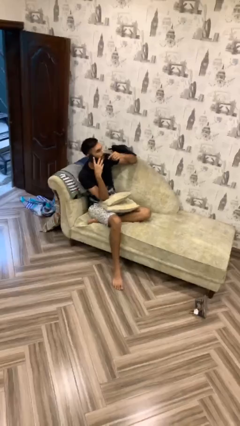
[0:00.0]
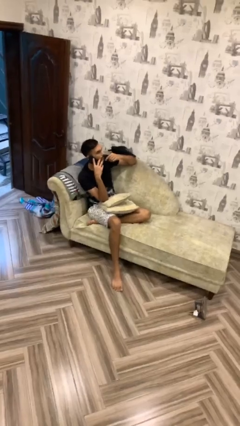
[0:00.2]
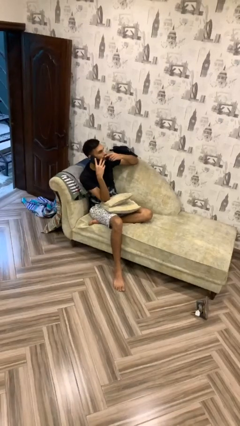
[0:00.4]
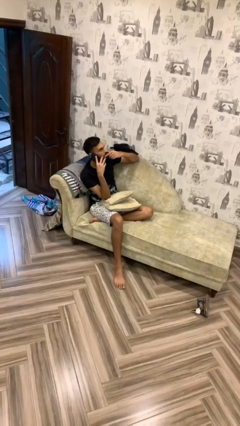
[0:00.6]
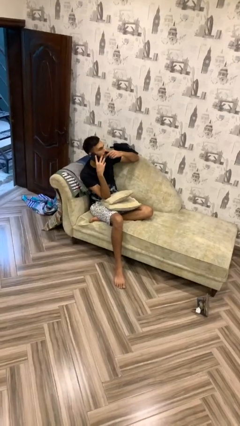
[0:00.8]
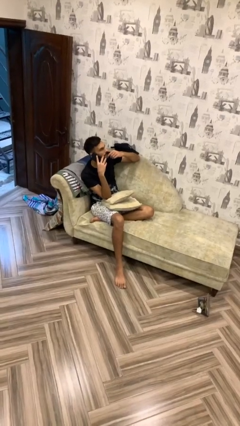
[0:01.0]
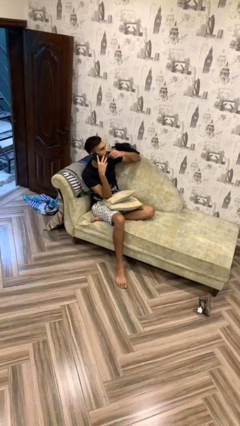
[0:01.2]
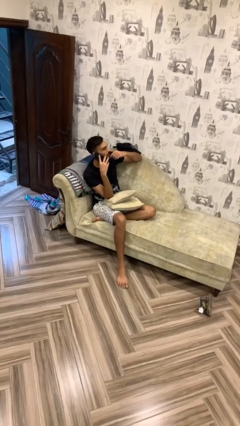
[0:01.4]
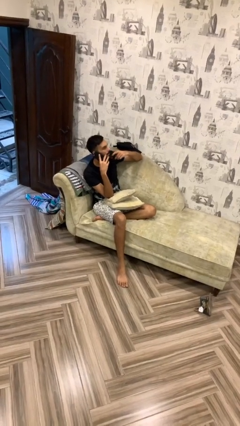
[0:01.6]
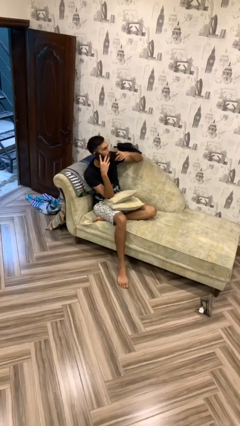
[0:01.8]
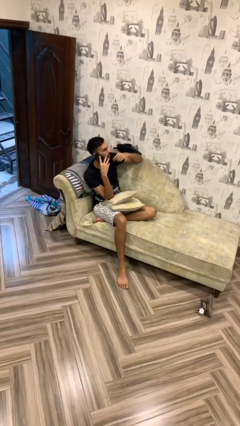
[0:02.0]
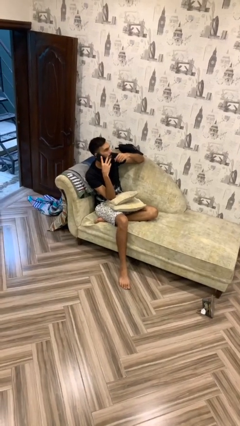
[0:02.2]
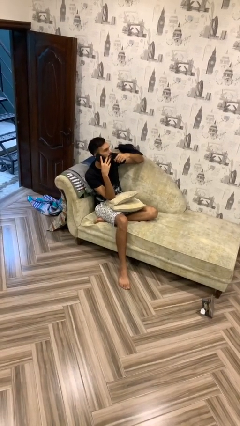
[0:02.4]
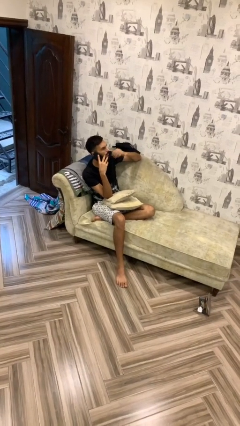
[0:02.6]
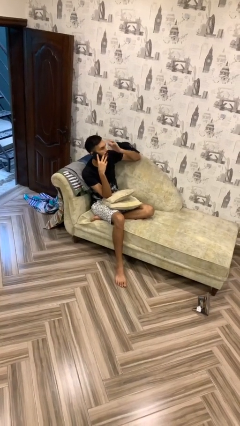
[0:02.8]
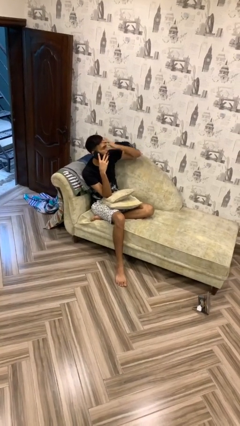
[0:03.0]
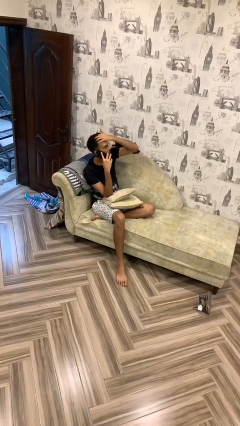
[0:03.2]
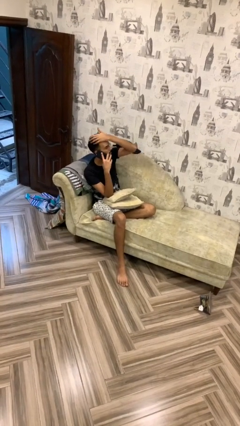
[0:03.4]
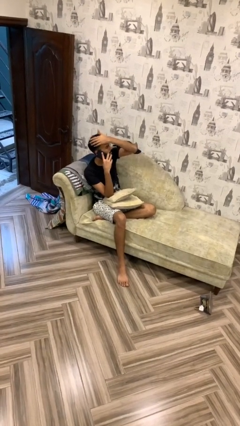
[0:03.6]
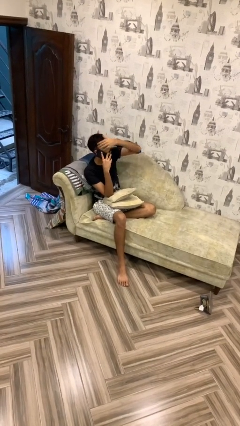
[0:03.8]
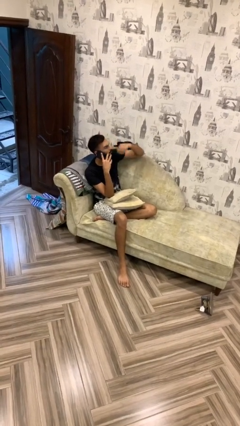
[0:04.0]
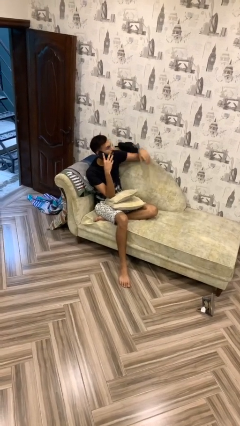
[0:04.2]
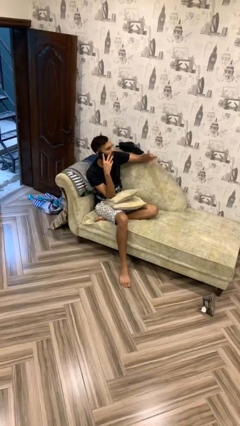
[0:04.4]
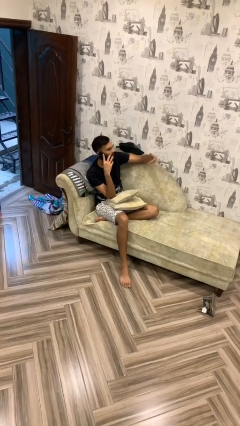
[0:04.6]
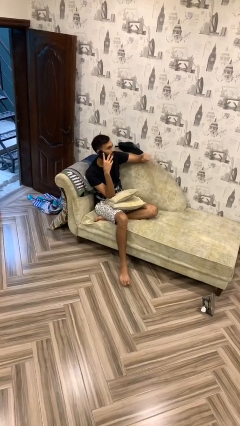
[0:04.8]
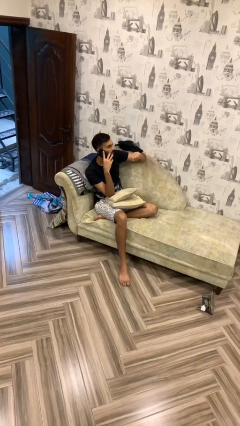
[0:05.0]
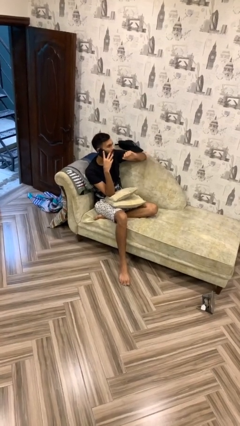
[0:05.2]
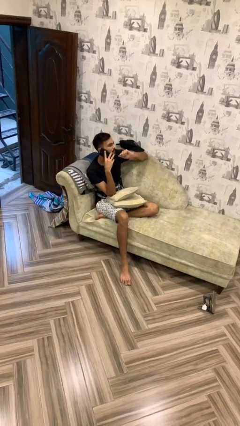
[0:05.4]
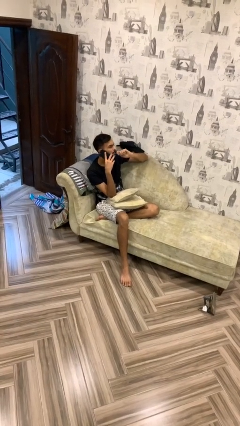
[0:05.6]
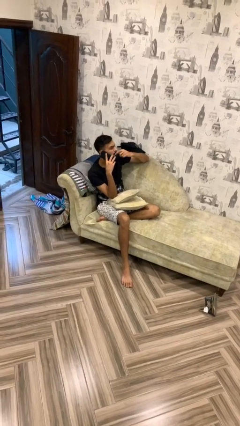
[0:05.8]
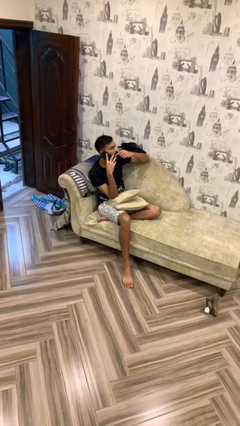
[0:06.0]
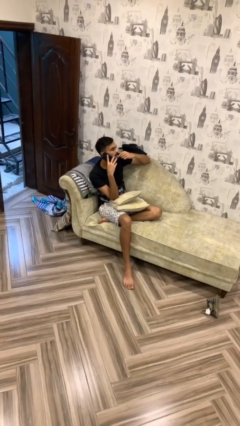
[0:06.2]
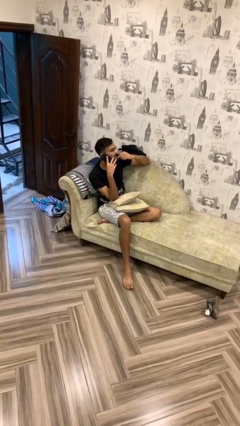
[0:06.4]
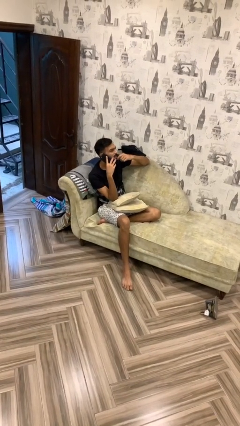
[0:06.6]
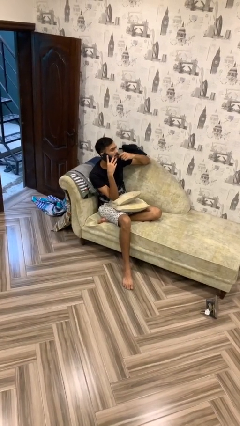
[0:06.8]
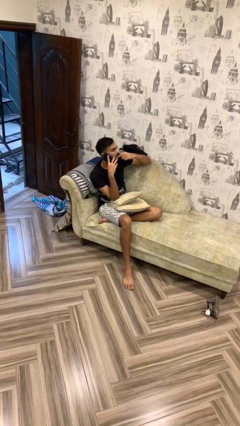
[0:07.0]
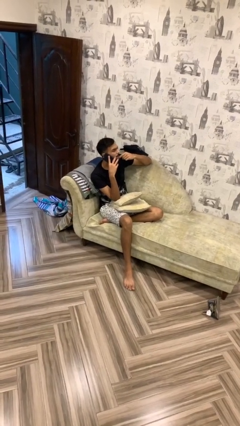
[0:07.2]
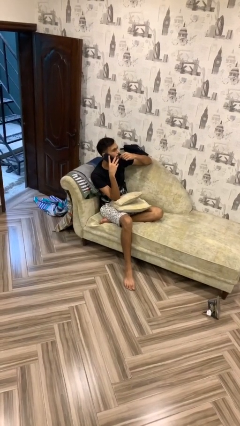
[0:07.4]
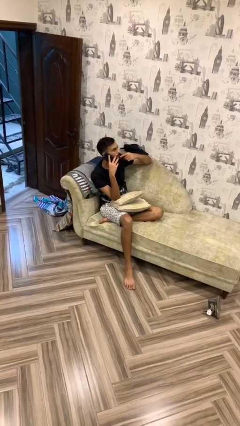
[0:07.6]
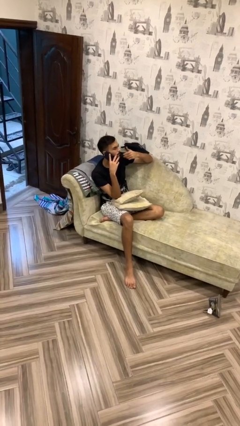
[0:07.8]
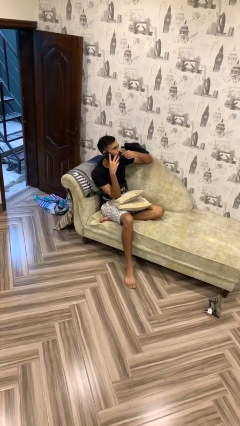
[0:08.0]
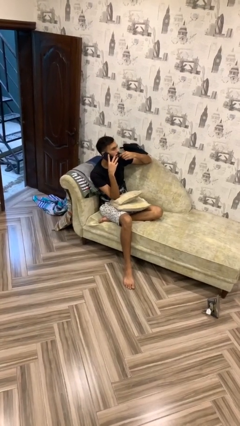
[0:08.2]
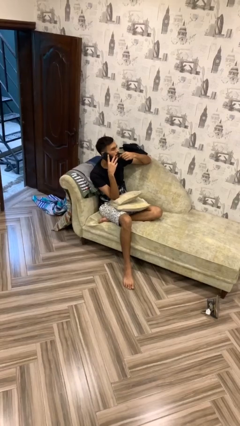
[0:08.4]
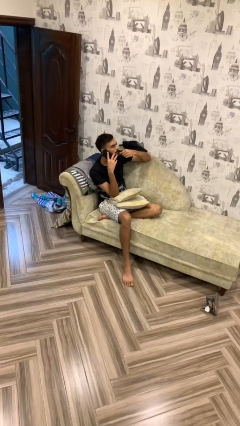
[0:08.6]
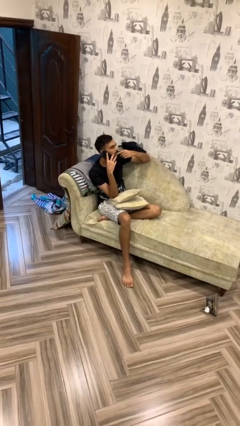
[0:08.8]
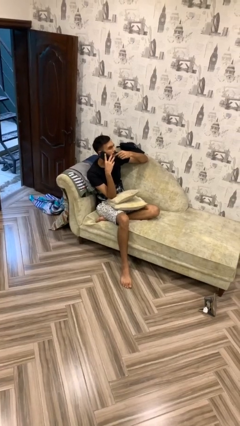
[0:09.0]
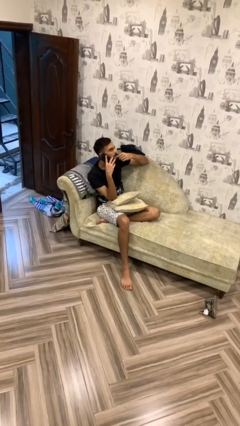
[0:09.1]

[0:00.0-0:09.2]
person talks on phone

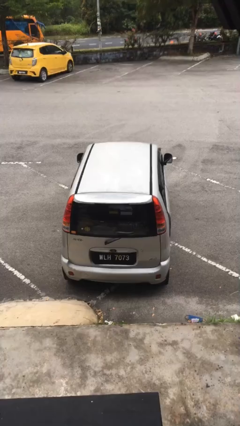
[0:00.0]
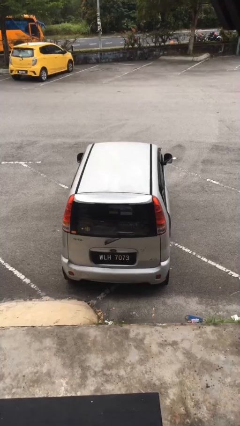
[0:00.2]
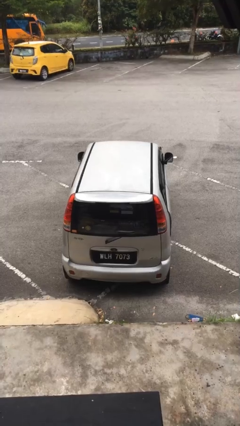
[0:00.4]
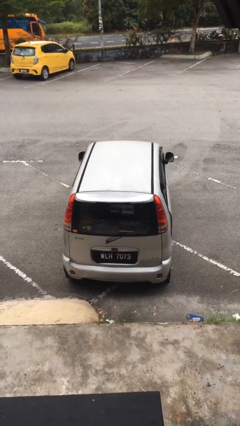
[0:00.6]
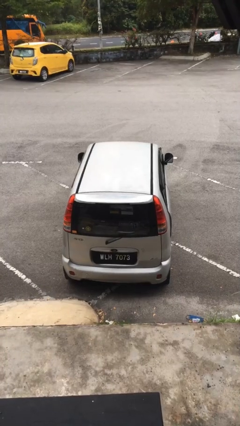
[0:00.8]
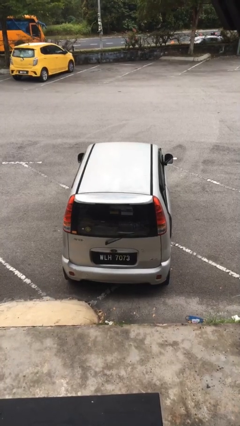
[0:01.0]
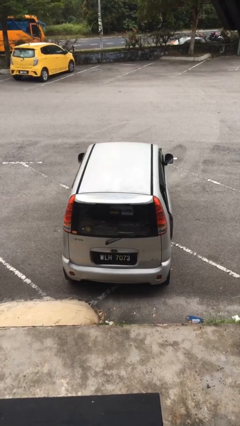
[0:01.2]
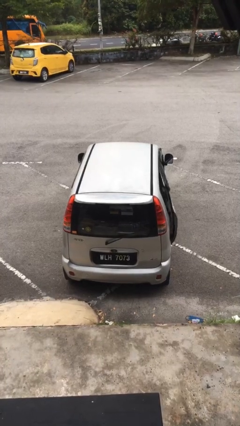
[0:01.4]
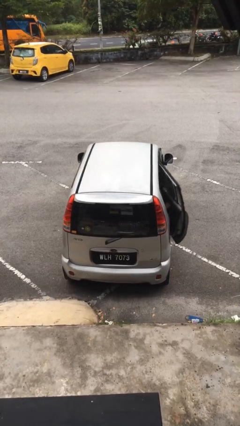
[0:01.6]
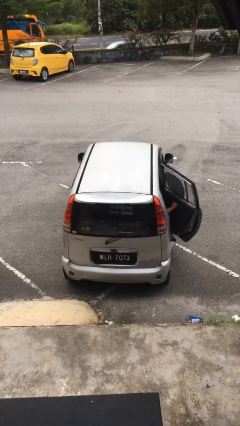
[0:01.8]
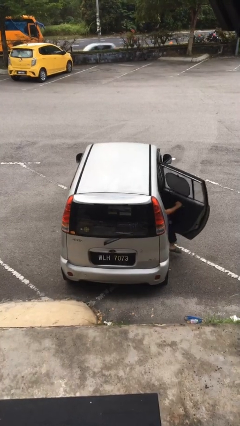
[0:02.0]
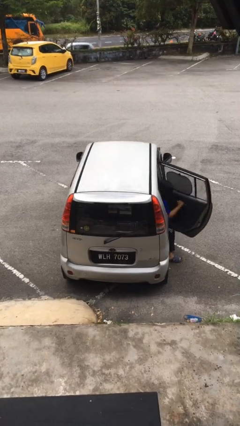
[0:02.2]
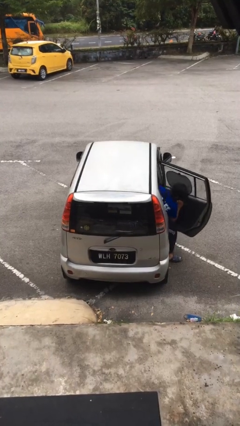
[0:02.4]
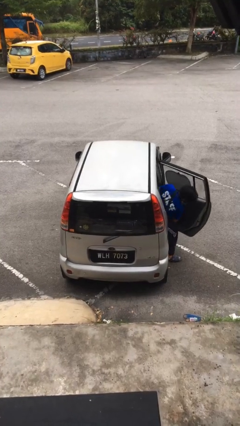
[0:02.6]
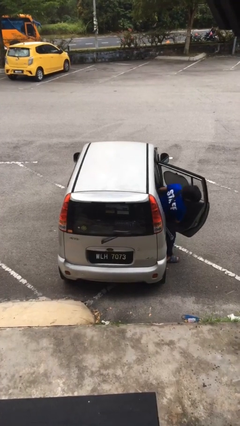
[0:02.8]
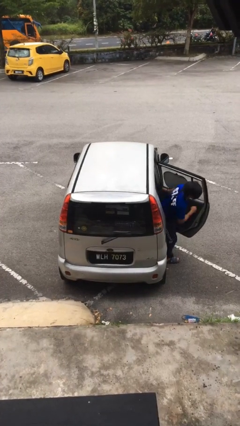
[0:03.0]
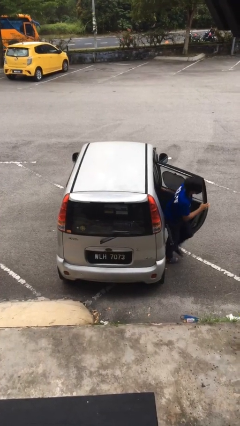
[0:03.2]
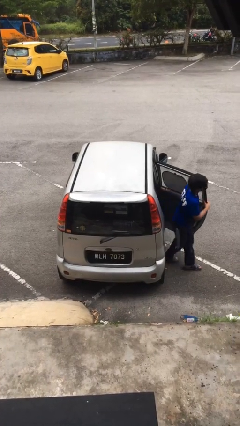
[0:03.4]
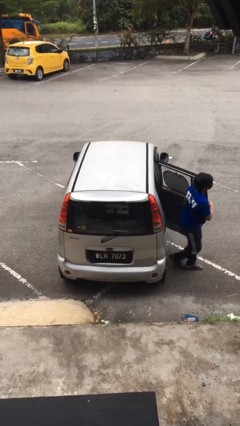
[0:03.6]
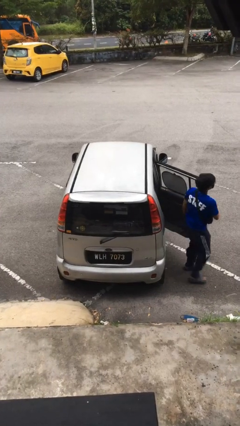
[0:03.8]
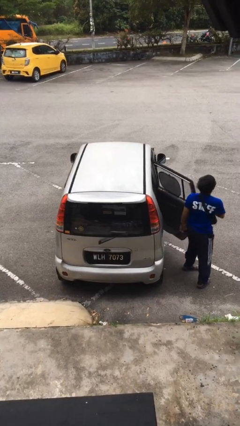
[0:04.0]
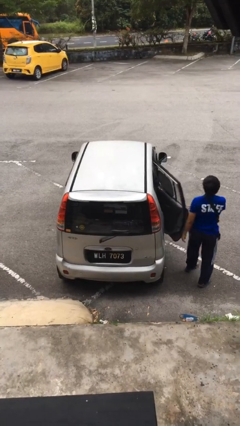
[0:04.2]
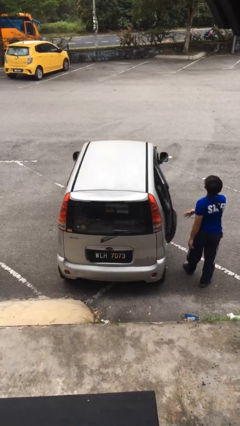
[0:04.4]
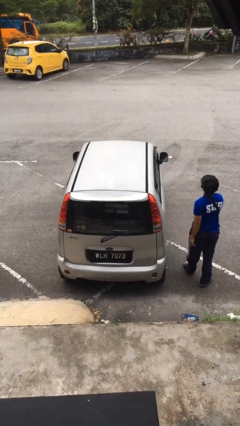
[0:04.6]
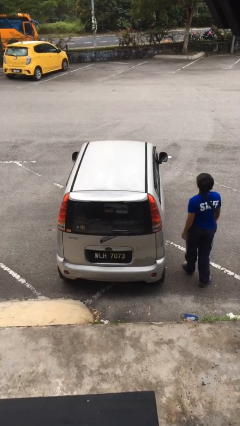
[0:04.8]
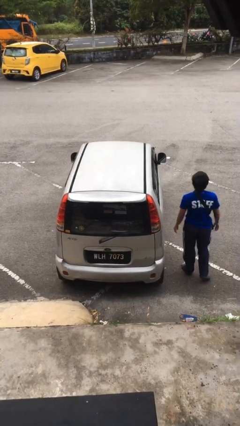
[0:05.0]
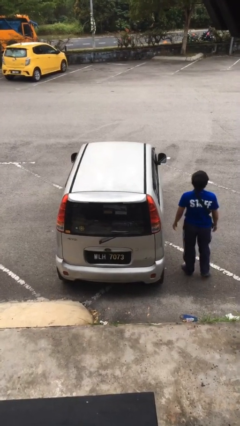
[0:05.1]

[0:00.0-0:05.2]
car drops off person

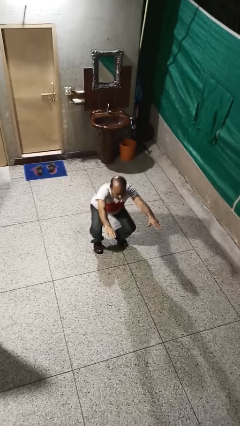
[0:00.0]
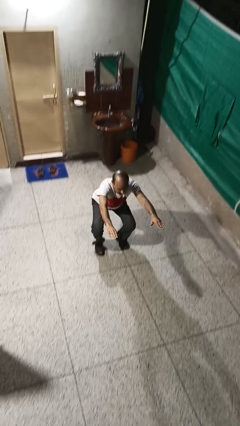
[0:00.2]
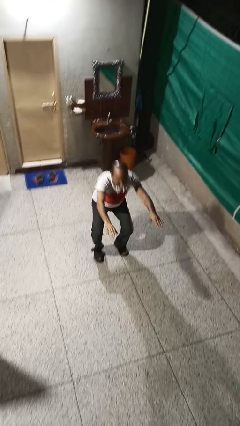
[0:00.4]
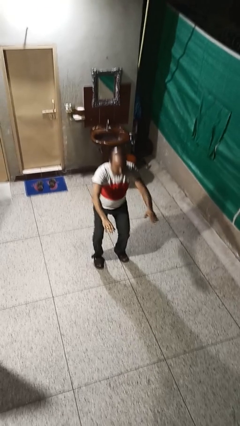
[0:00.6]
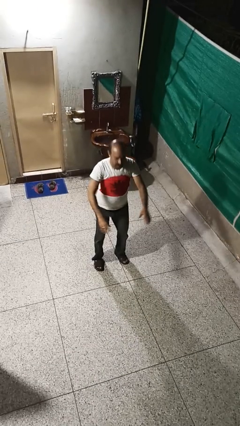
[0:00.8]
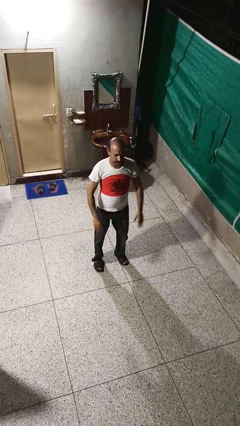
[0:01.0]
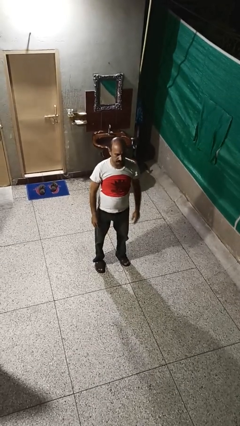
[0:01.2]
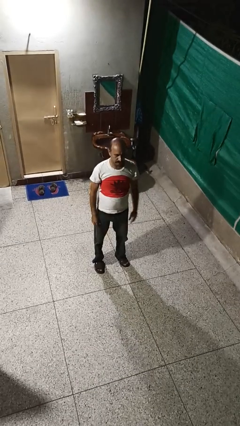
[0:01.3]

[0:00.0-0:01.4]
person stands up

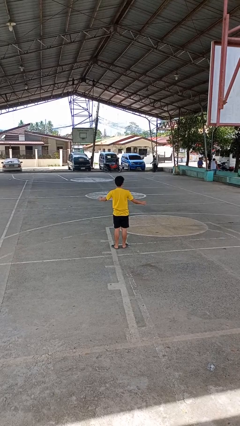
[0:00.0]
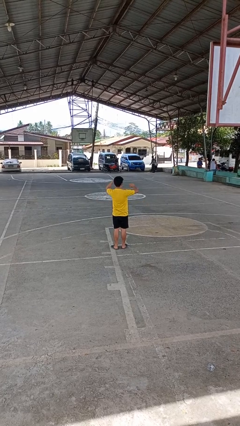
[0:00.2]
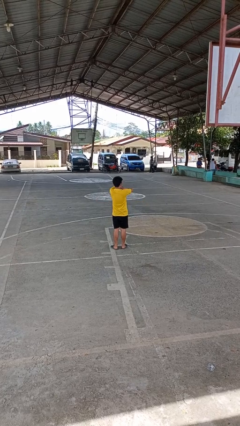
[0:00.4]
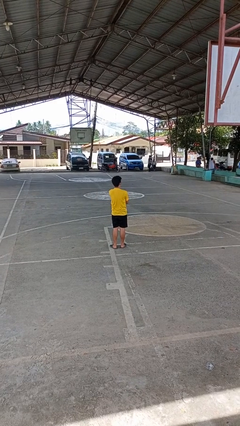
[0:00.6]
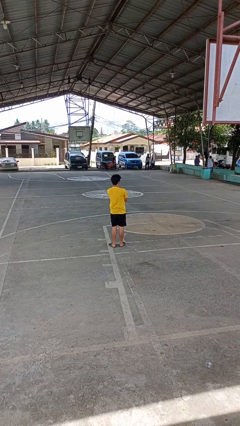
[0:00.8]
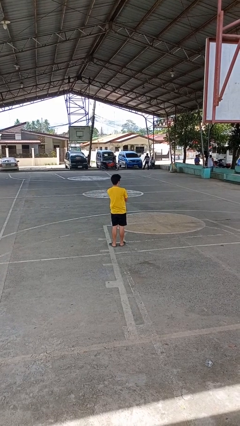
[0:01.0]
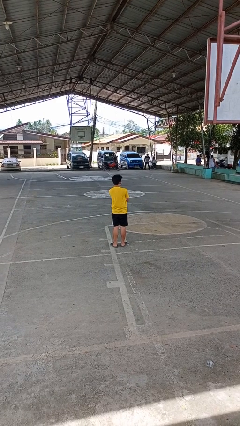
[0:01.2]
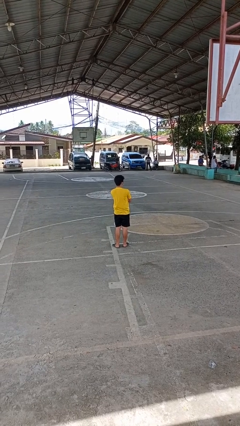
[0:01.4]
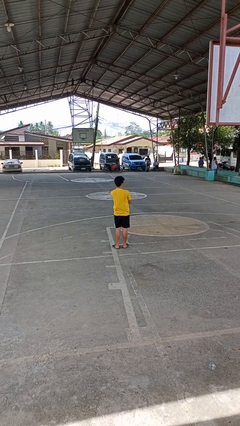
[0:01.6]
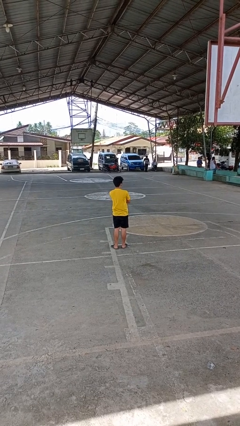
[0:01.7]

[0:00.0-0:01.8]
person crosses arms

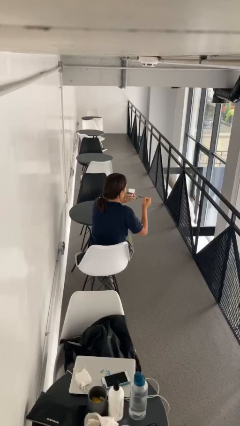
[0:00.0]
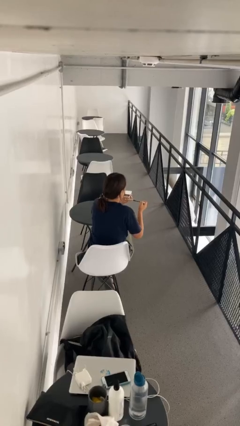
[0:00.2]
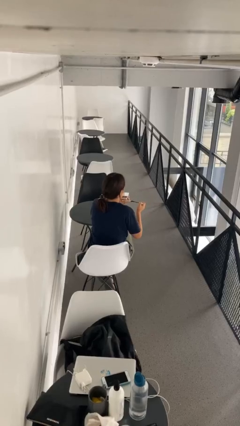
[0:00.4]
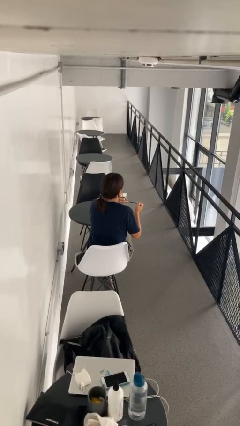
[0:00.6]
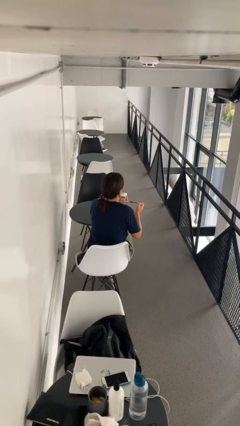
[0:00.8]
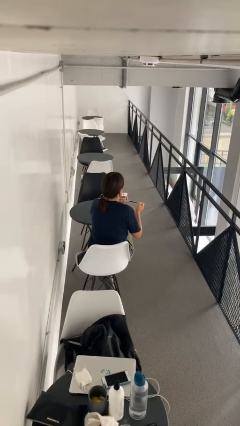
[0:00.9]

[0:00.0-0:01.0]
person applies eye makeup
